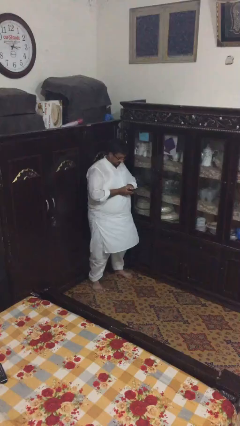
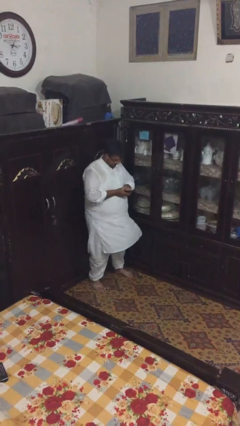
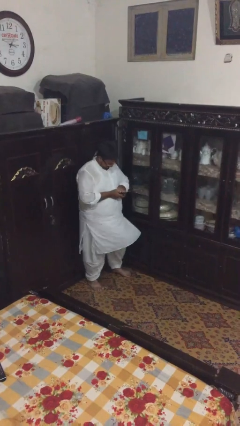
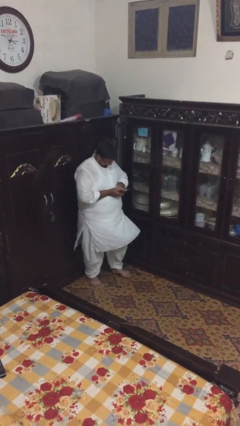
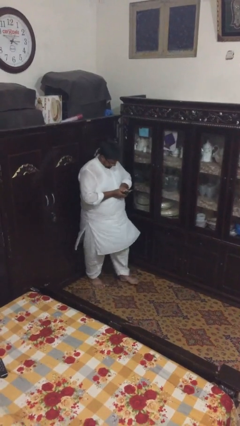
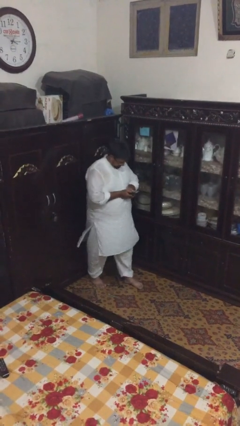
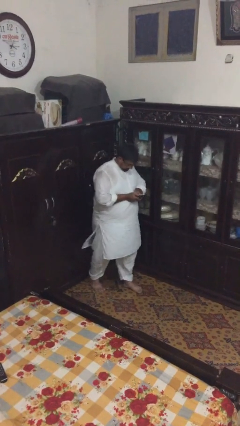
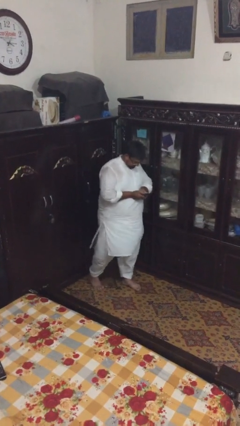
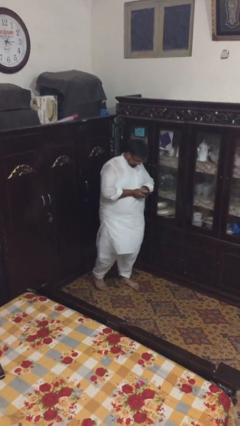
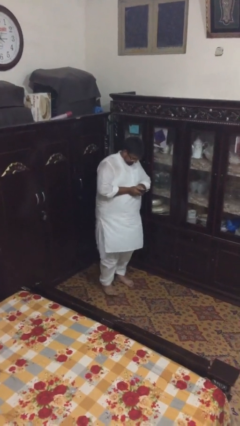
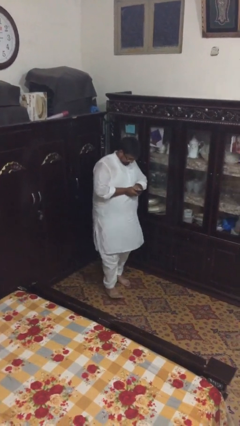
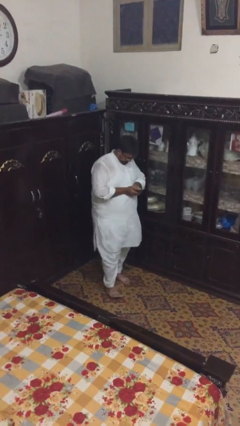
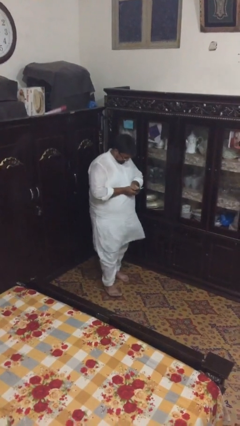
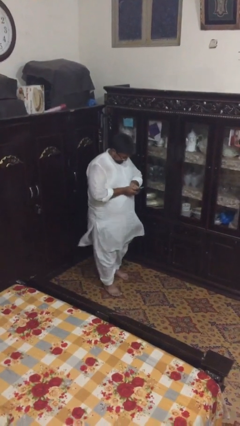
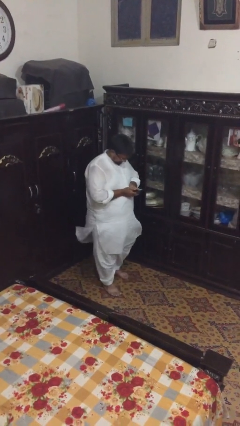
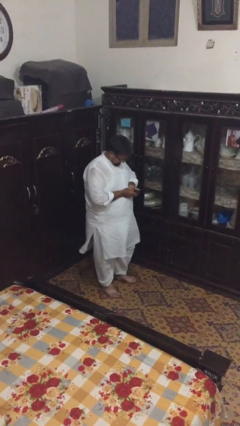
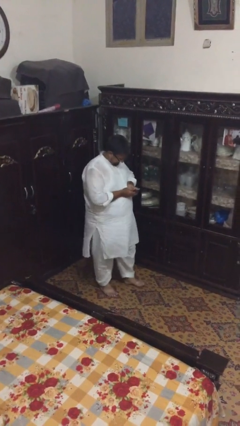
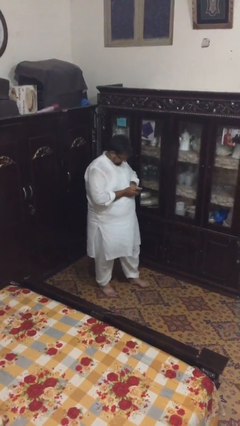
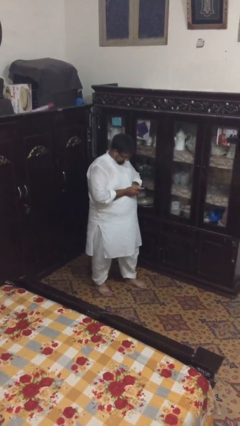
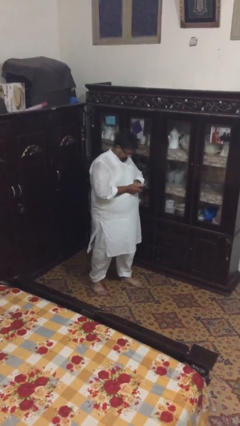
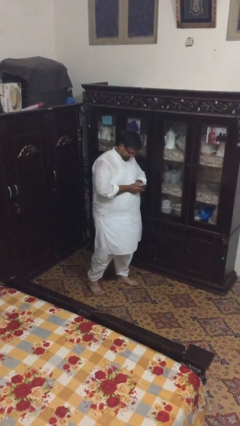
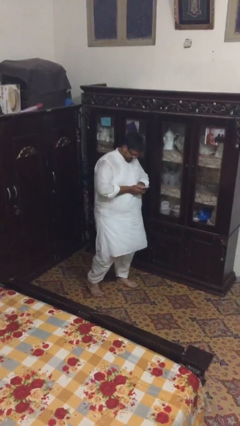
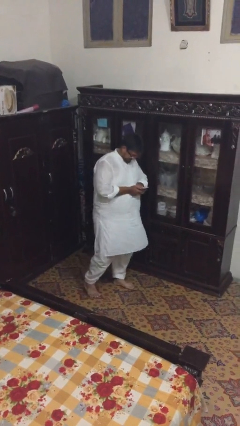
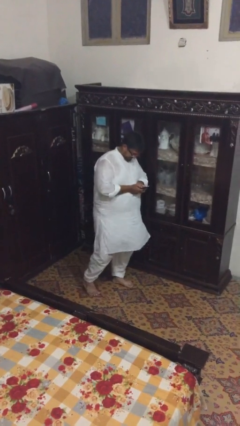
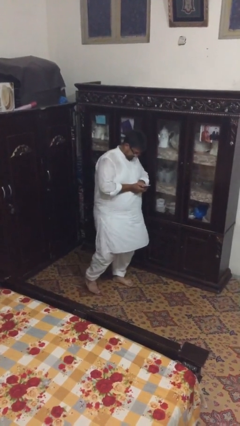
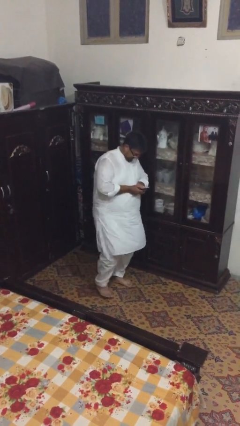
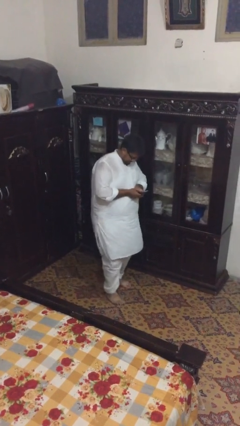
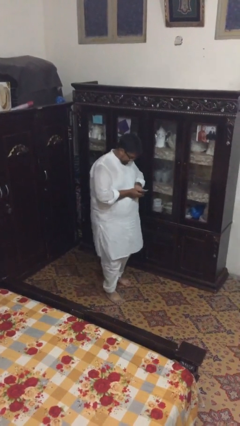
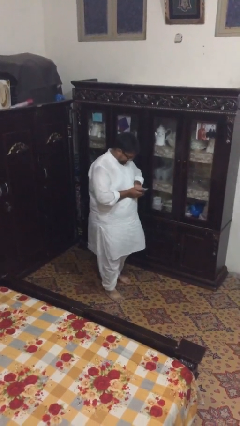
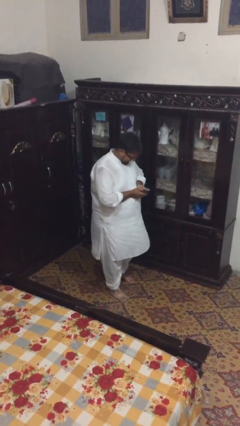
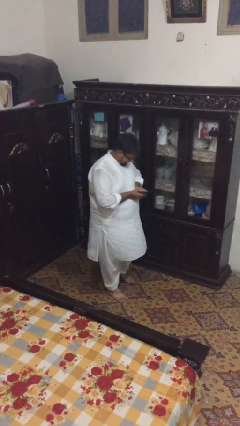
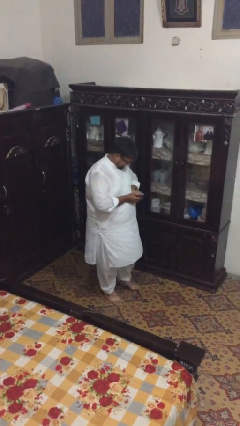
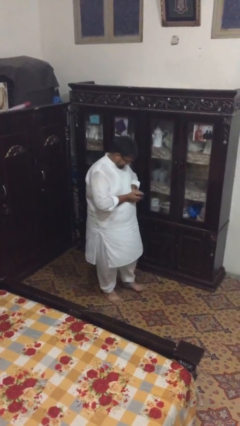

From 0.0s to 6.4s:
person texts on phone

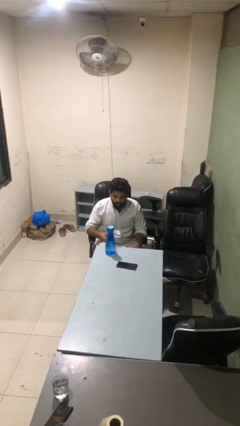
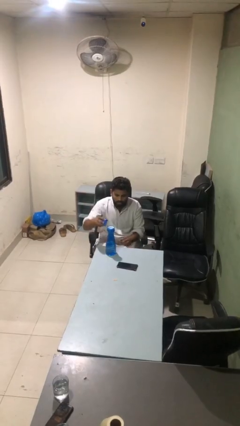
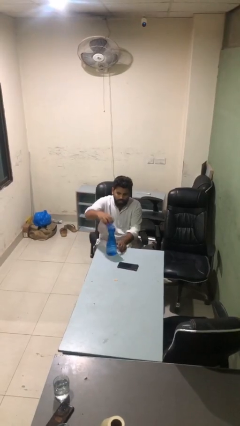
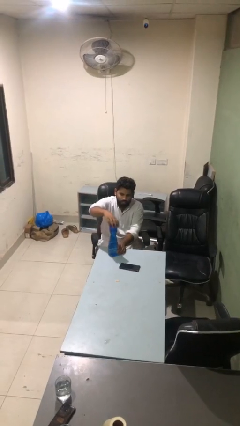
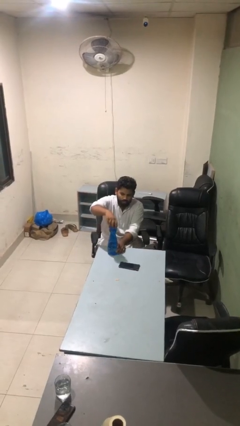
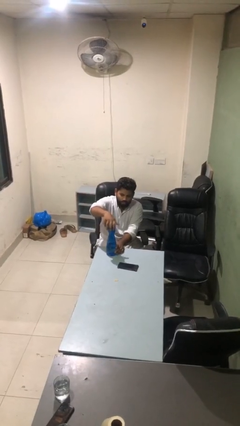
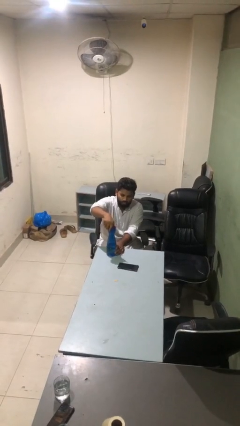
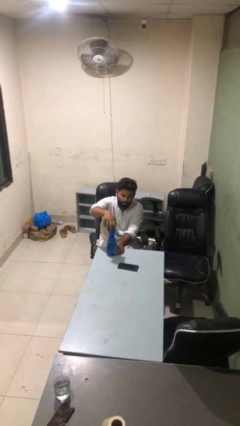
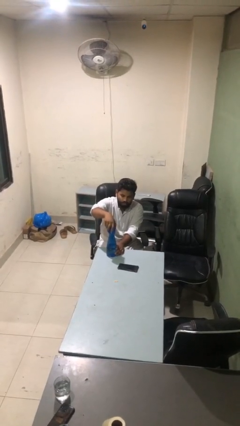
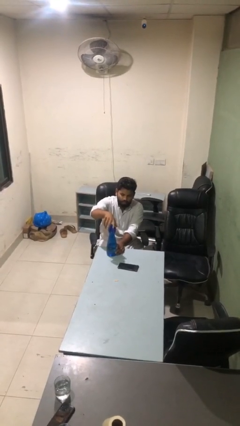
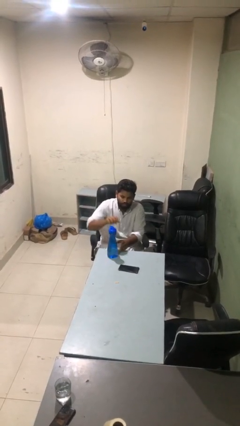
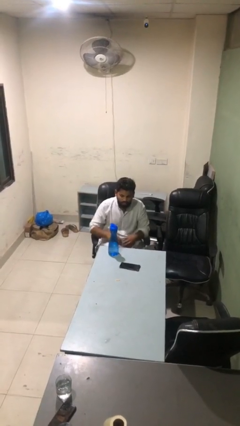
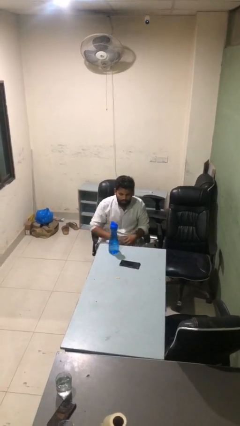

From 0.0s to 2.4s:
person screws lid to bottle

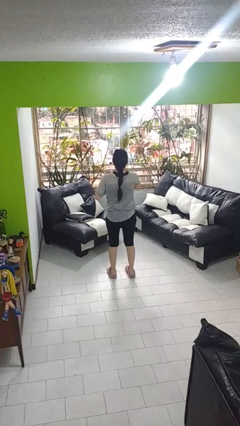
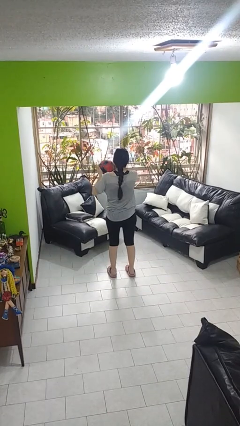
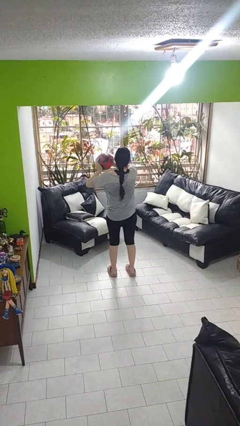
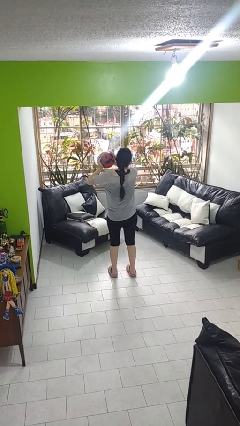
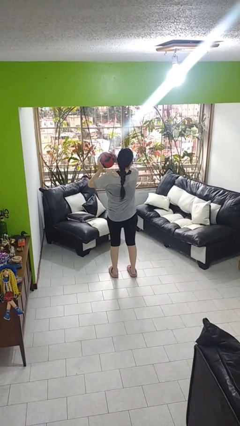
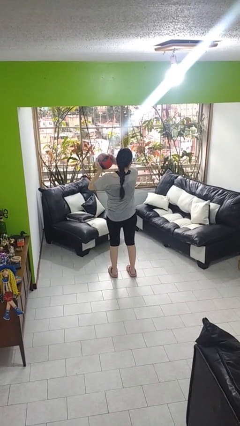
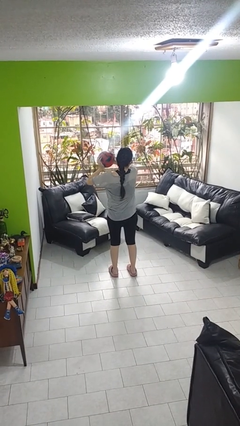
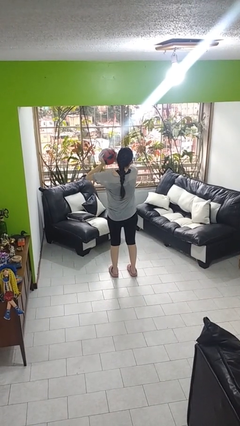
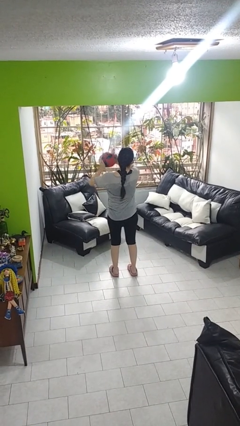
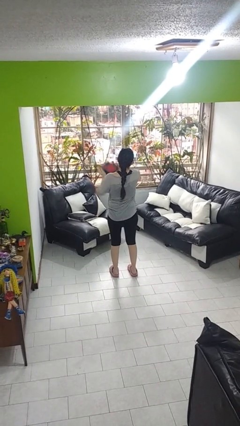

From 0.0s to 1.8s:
person squeezes object

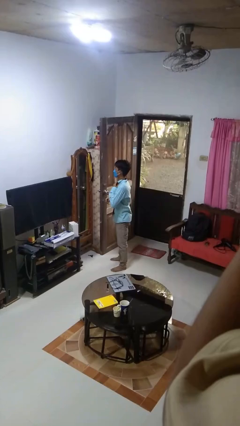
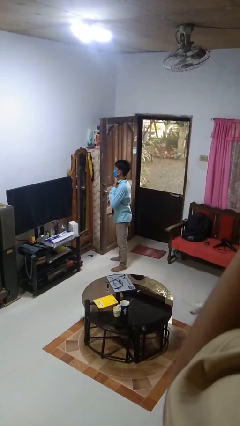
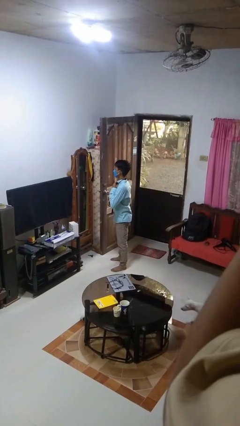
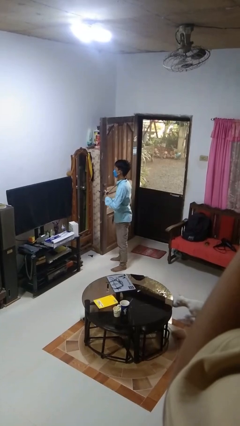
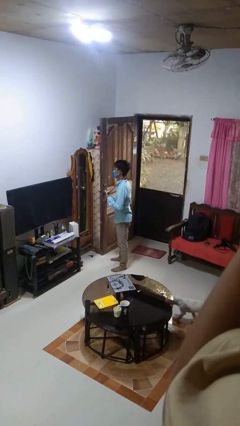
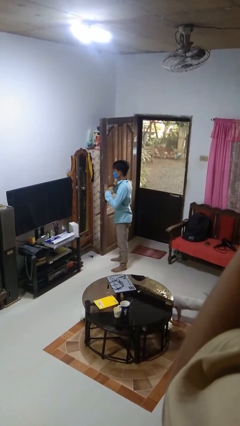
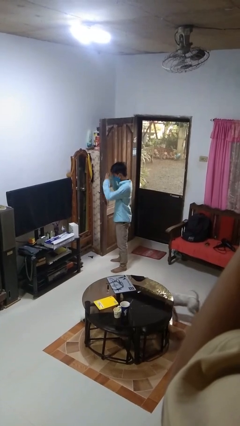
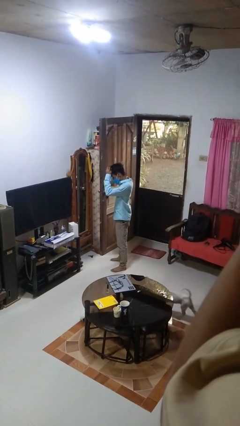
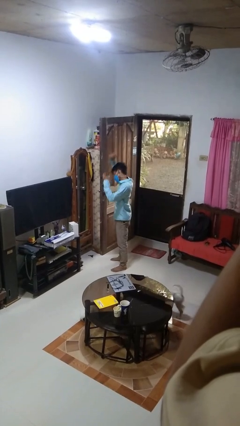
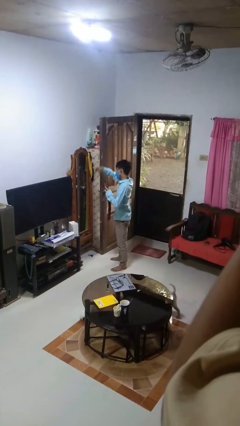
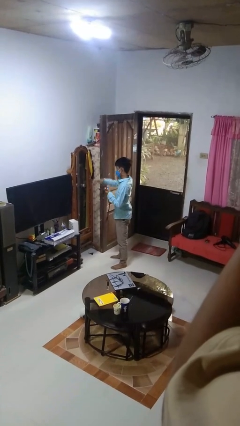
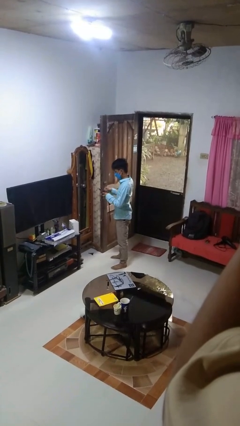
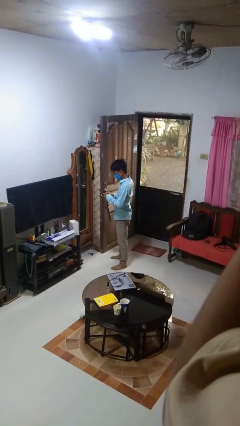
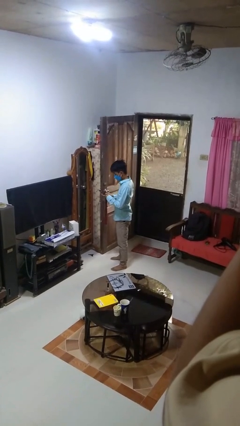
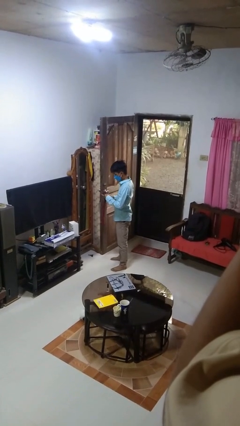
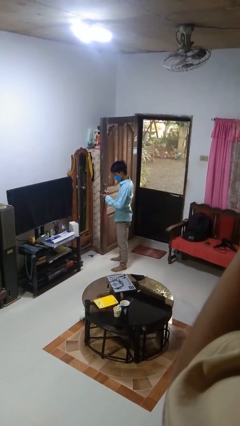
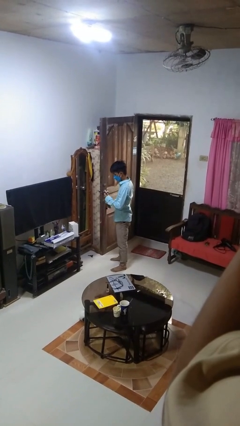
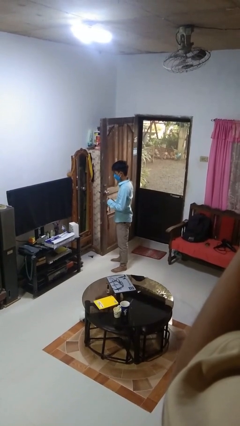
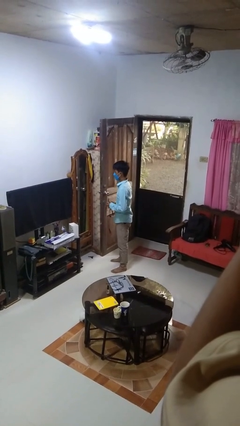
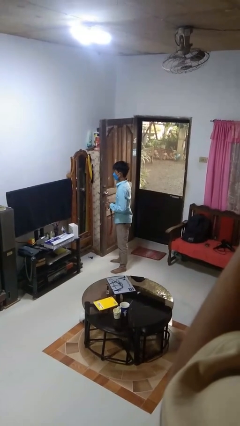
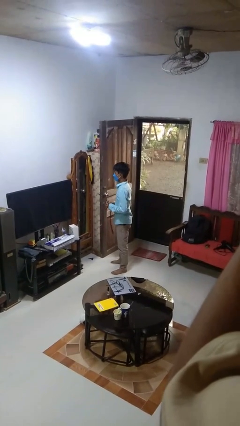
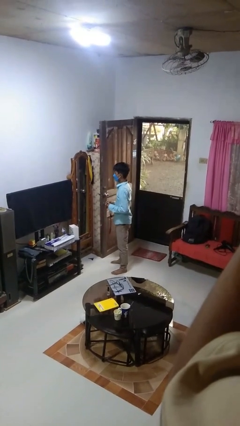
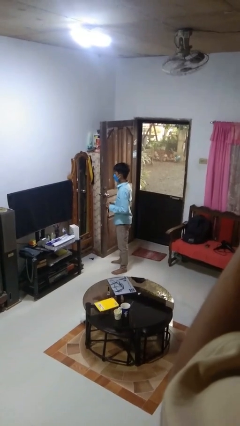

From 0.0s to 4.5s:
person takes off necktie

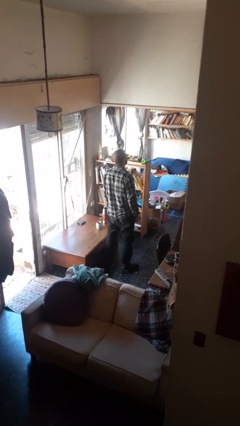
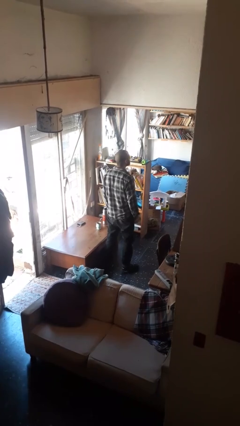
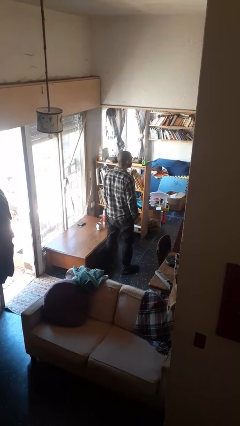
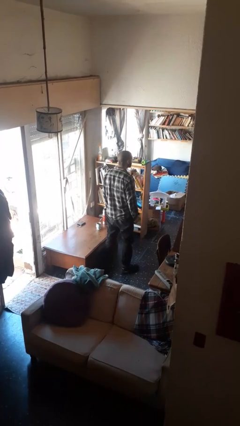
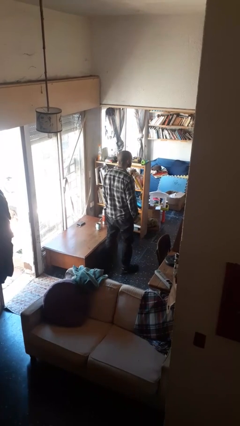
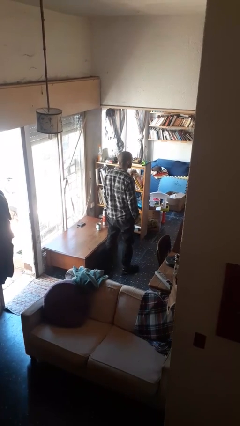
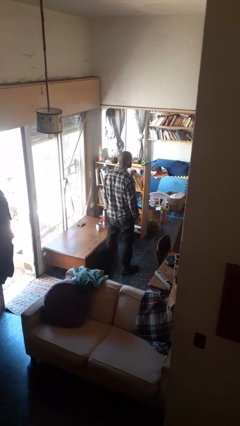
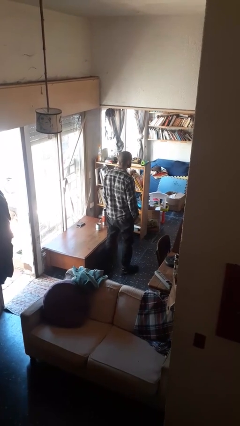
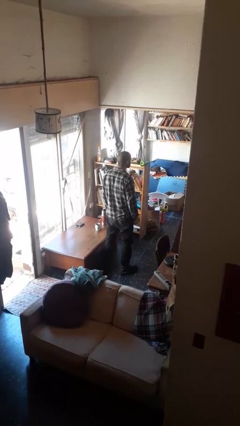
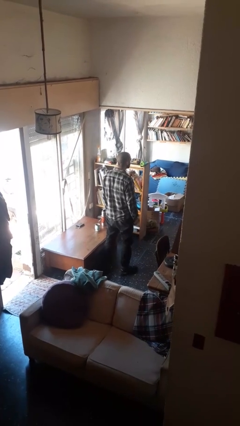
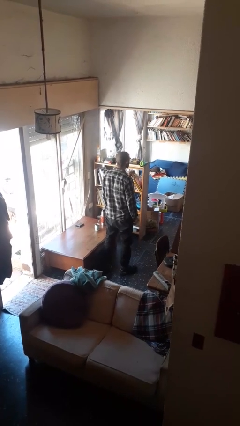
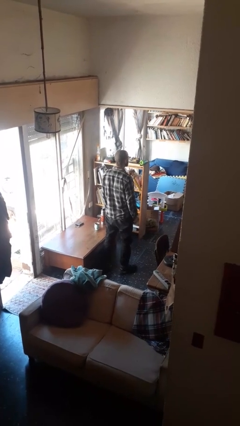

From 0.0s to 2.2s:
person sticks out tongue
